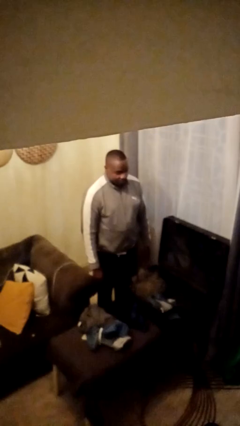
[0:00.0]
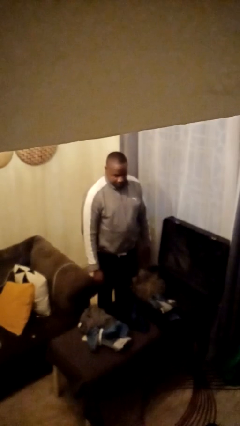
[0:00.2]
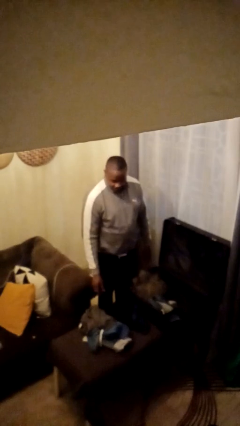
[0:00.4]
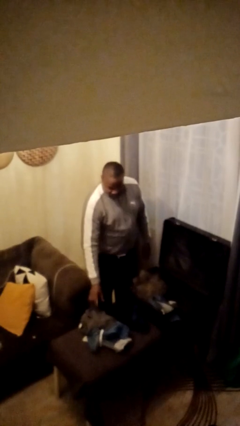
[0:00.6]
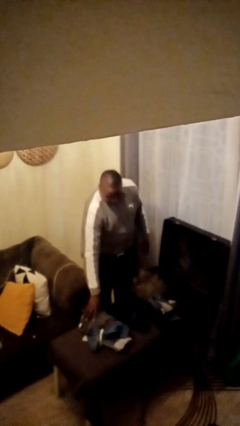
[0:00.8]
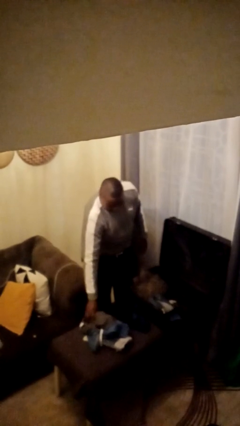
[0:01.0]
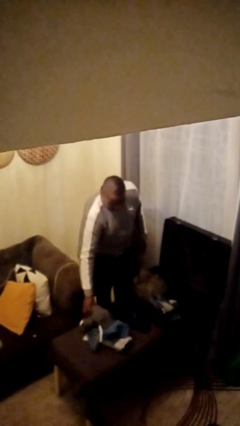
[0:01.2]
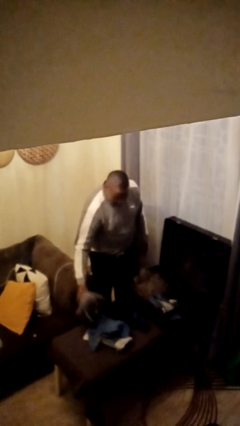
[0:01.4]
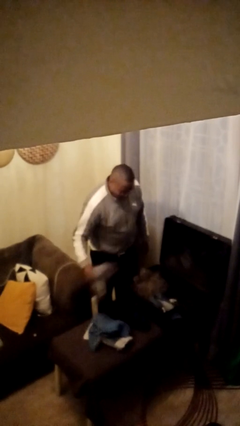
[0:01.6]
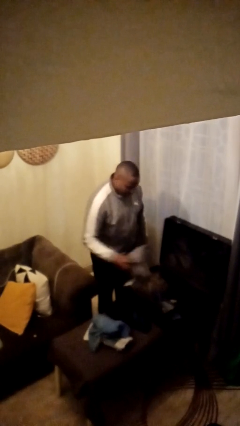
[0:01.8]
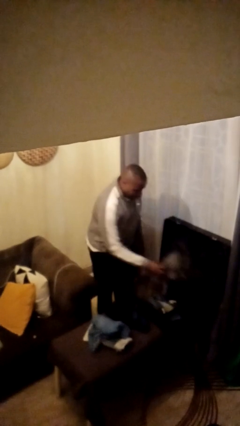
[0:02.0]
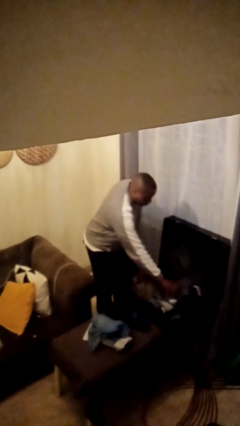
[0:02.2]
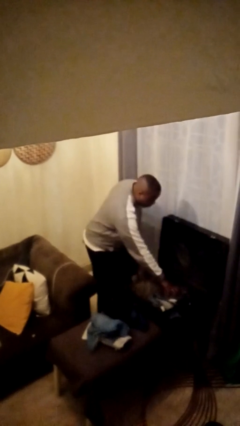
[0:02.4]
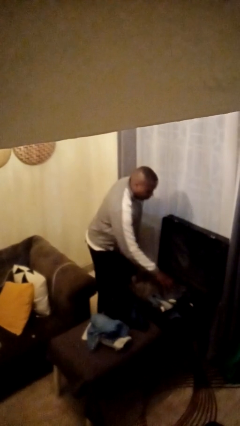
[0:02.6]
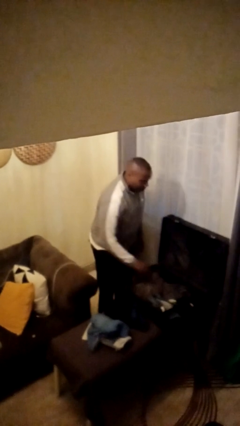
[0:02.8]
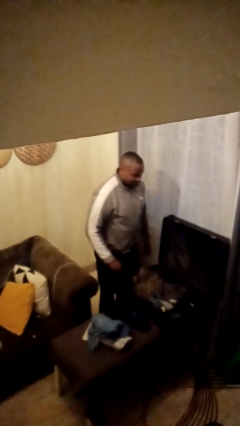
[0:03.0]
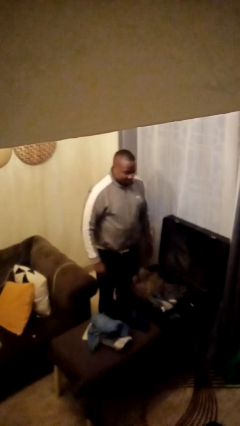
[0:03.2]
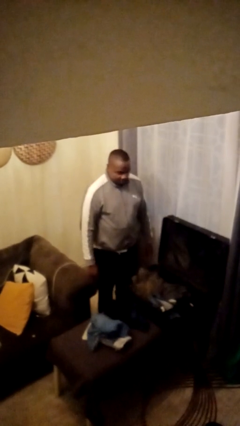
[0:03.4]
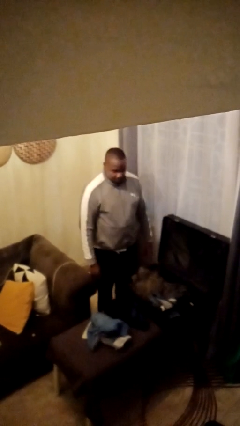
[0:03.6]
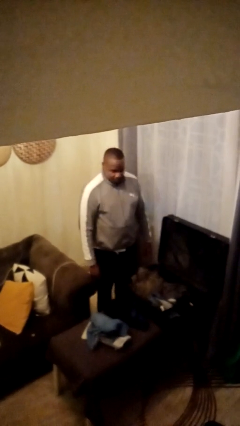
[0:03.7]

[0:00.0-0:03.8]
person loads clothes into suitcase

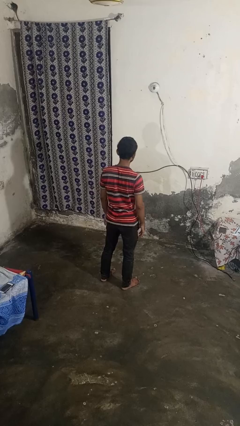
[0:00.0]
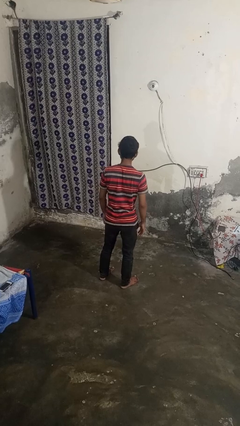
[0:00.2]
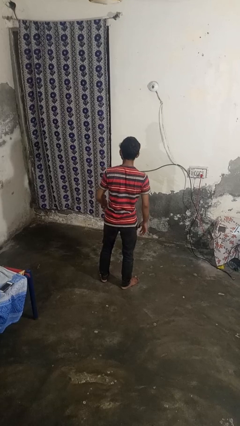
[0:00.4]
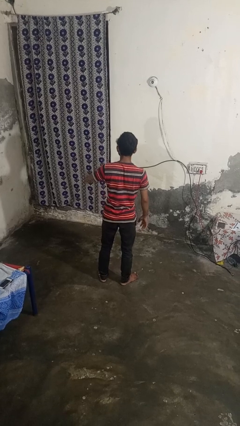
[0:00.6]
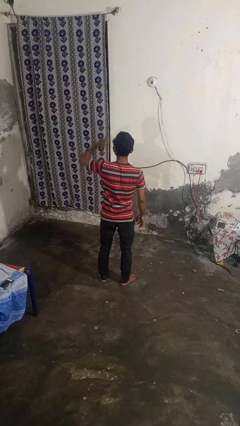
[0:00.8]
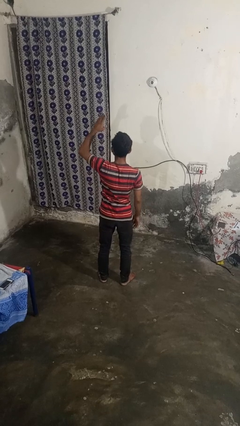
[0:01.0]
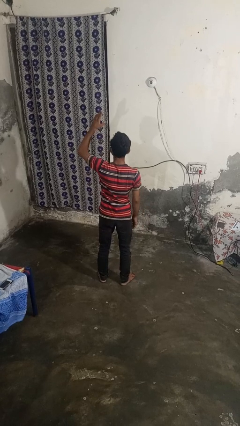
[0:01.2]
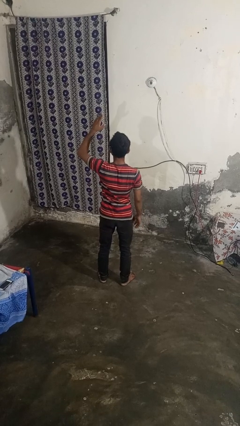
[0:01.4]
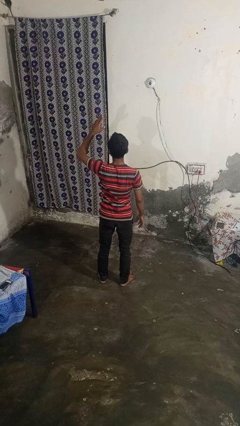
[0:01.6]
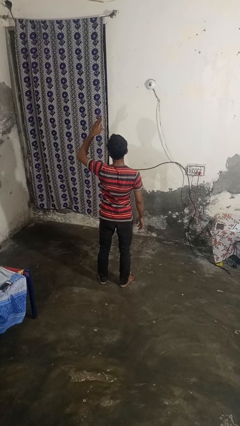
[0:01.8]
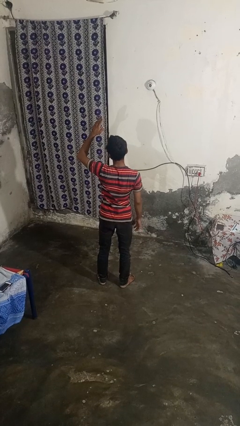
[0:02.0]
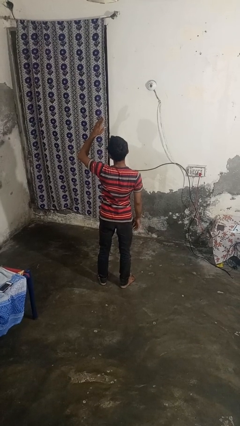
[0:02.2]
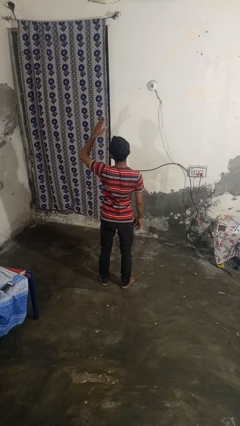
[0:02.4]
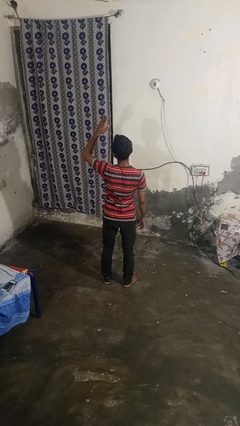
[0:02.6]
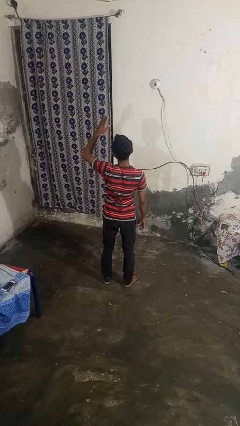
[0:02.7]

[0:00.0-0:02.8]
person gestures swipe up

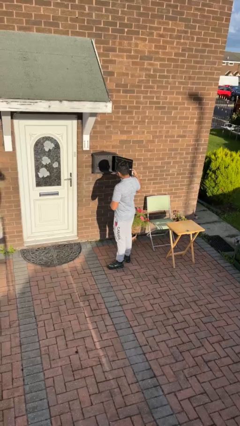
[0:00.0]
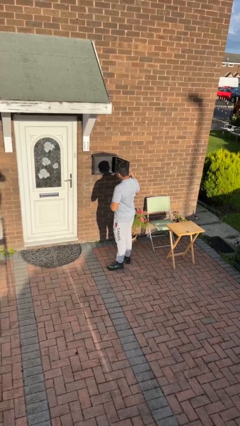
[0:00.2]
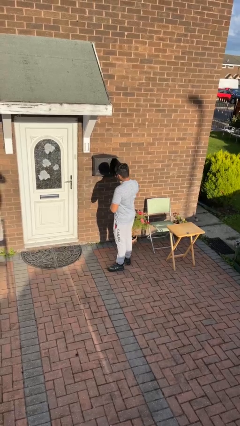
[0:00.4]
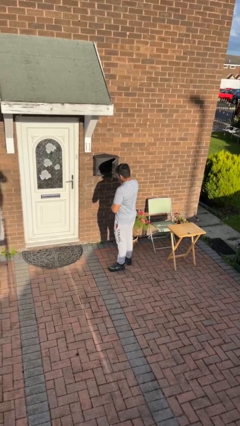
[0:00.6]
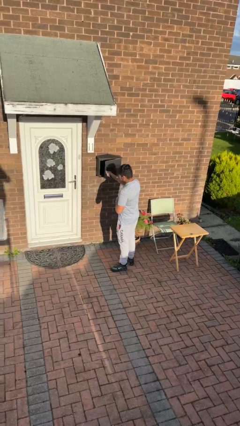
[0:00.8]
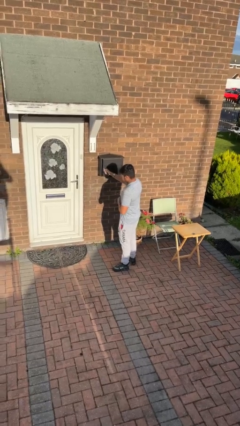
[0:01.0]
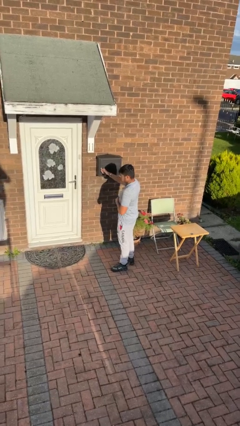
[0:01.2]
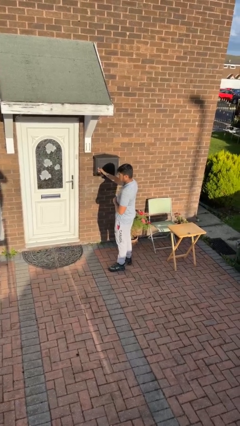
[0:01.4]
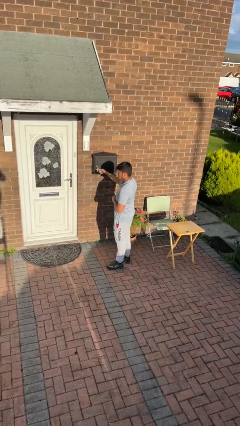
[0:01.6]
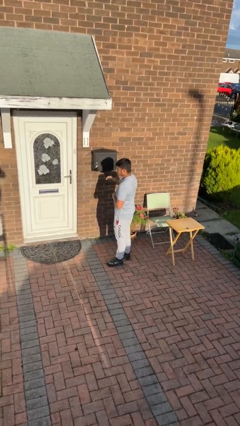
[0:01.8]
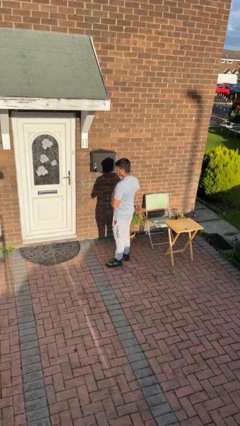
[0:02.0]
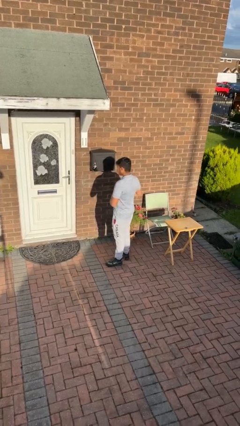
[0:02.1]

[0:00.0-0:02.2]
person closes mailbox

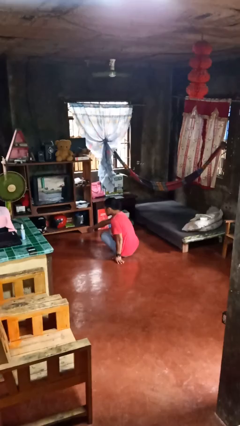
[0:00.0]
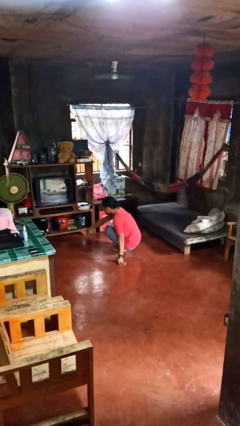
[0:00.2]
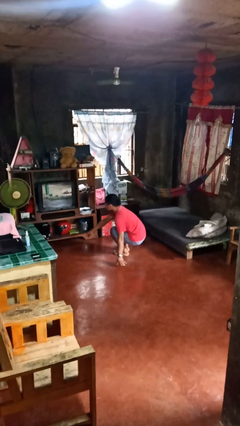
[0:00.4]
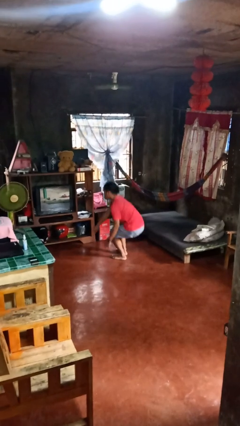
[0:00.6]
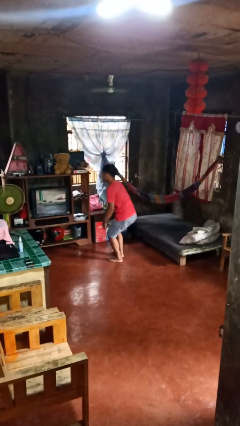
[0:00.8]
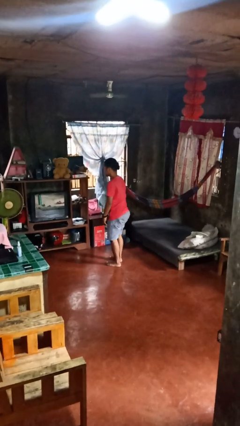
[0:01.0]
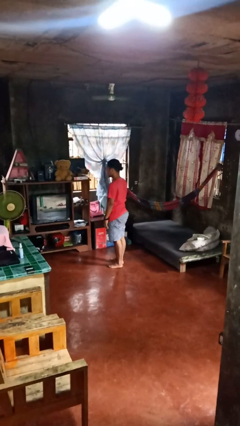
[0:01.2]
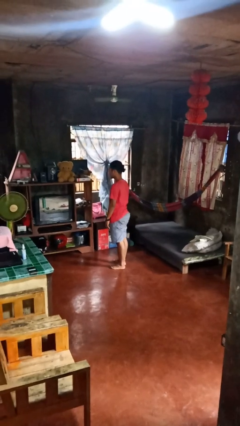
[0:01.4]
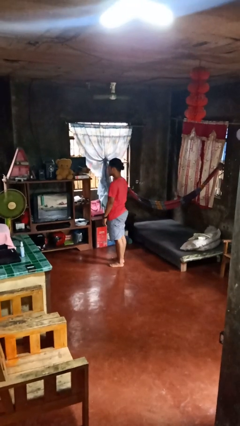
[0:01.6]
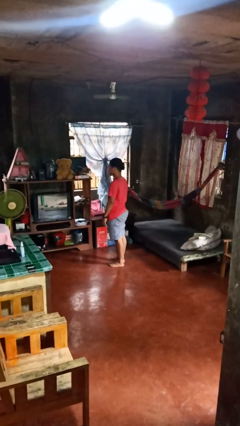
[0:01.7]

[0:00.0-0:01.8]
person stands up from floor

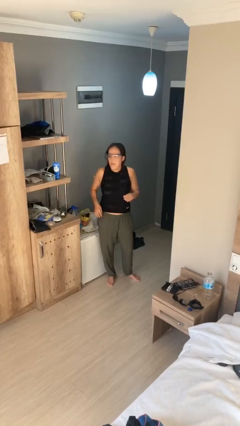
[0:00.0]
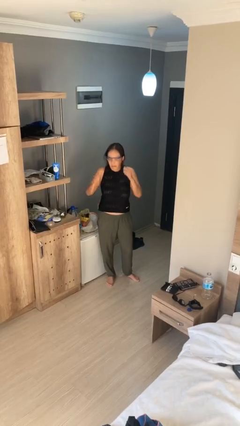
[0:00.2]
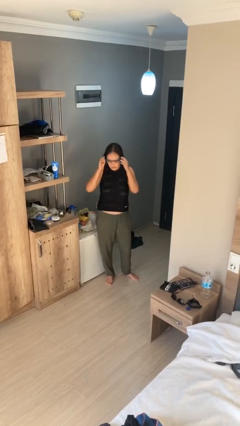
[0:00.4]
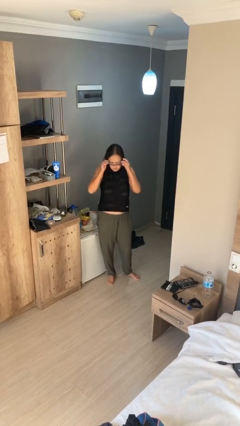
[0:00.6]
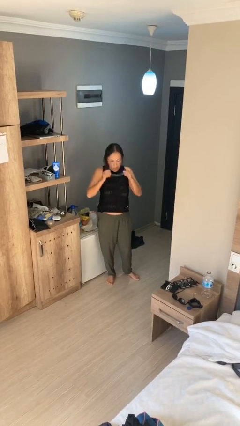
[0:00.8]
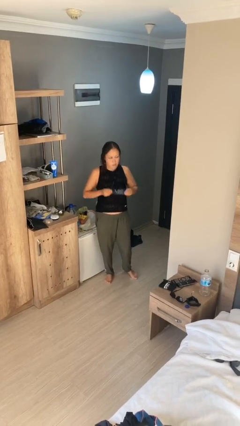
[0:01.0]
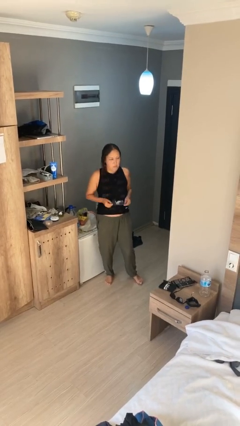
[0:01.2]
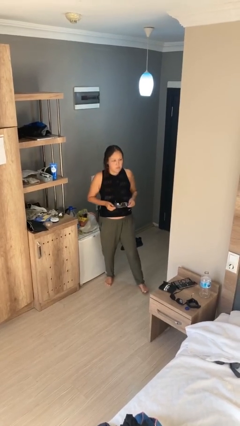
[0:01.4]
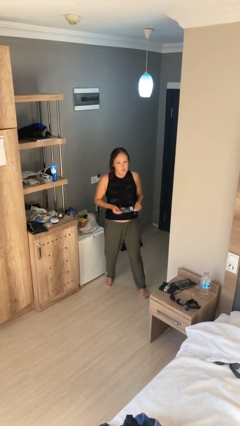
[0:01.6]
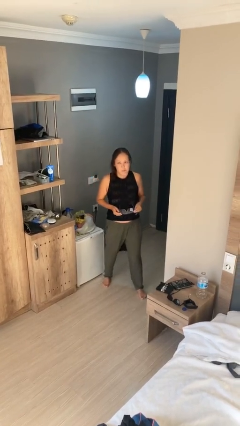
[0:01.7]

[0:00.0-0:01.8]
person takes off glasses

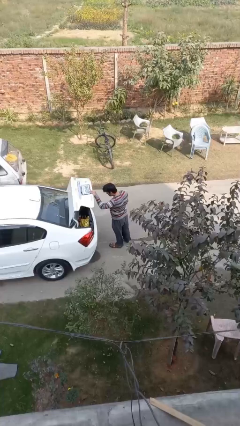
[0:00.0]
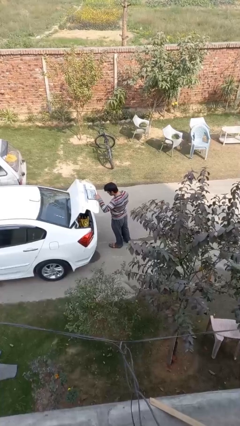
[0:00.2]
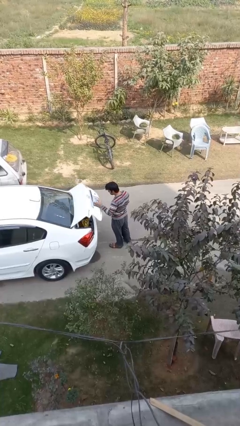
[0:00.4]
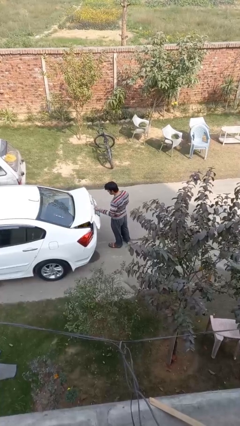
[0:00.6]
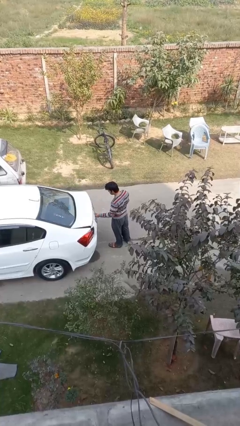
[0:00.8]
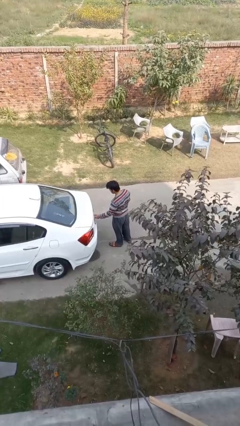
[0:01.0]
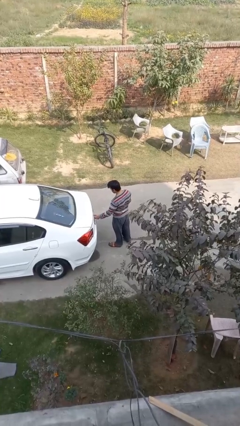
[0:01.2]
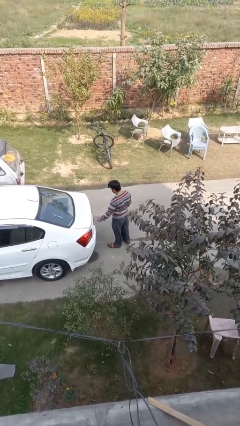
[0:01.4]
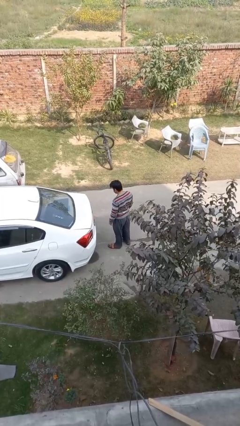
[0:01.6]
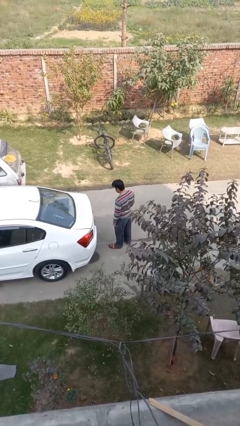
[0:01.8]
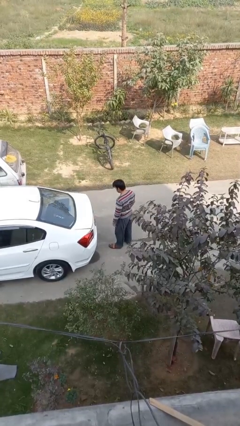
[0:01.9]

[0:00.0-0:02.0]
person closes car trunk

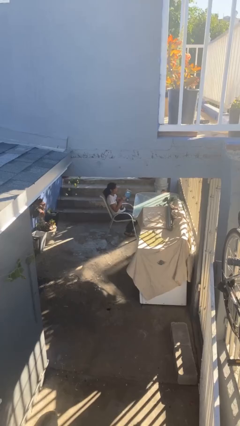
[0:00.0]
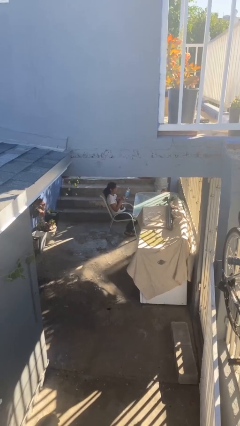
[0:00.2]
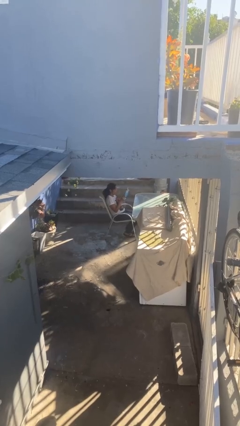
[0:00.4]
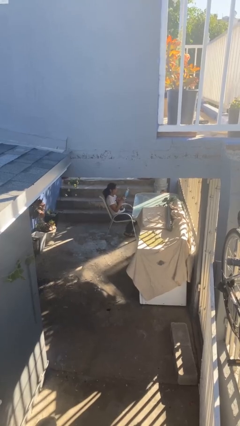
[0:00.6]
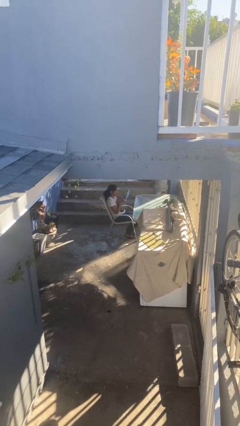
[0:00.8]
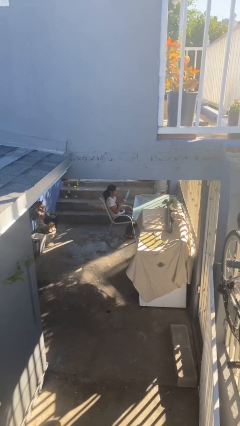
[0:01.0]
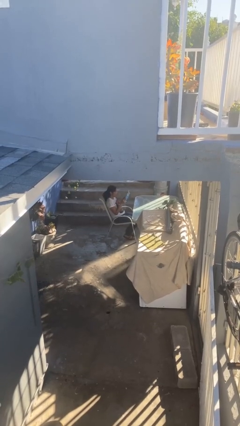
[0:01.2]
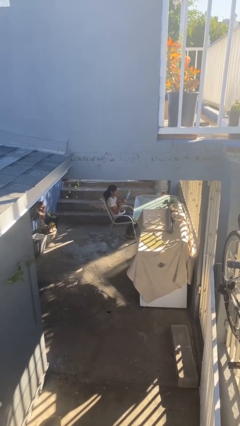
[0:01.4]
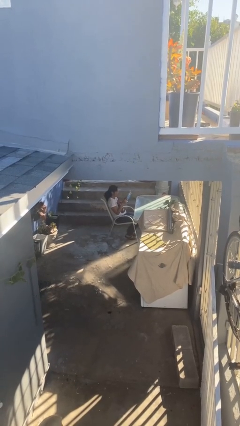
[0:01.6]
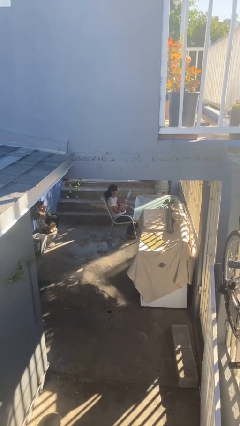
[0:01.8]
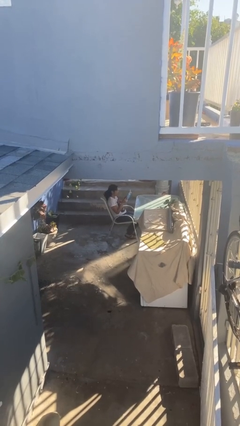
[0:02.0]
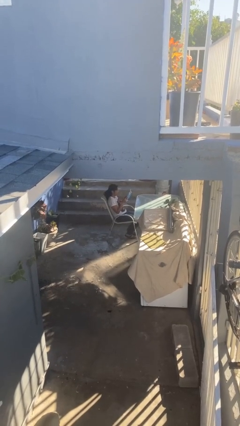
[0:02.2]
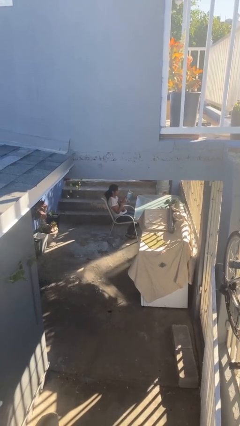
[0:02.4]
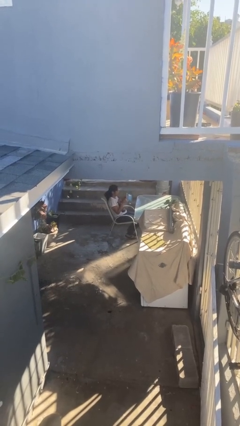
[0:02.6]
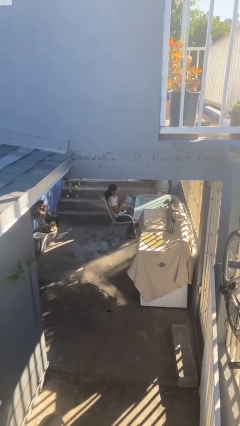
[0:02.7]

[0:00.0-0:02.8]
person reads document
